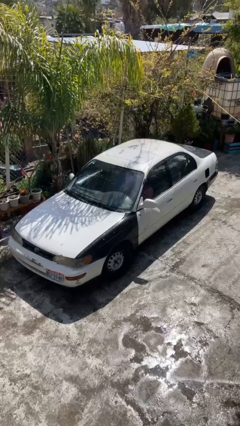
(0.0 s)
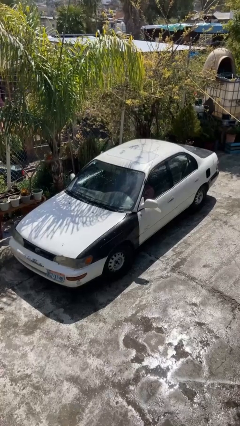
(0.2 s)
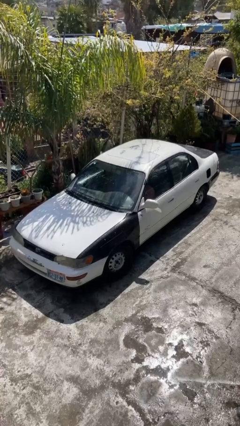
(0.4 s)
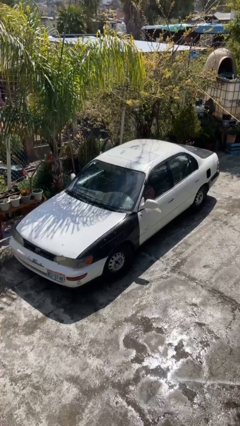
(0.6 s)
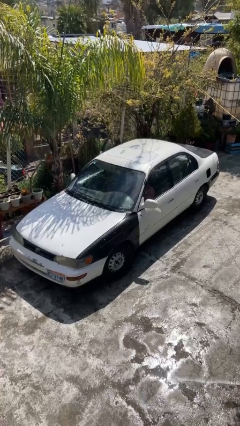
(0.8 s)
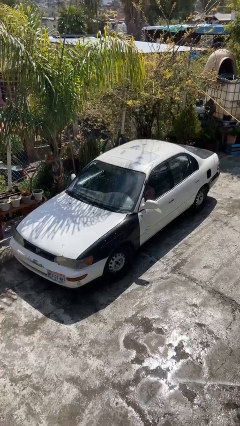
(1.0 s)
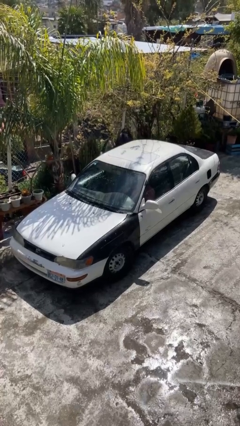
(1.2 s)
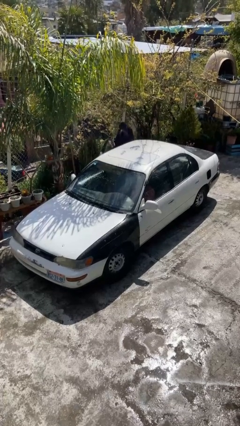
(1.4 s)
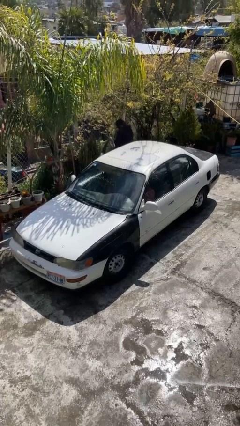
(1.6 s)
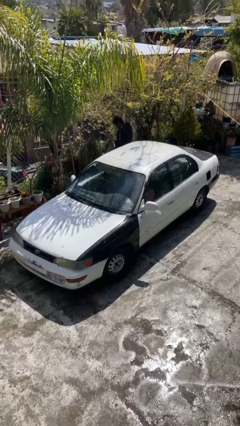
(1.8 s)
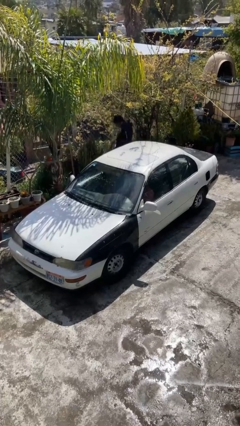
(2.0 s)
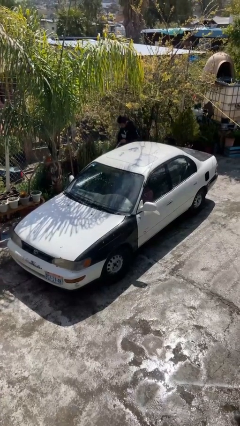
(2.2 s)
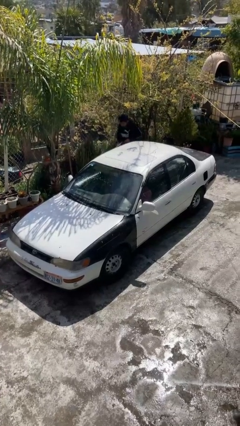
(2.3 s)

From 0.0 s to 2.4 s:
car drops off person

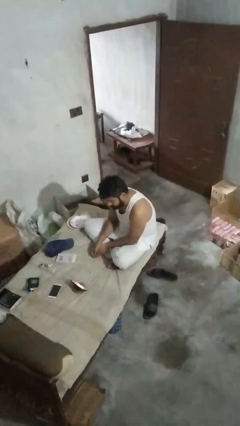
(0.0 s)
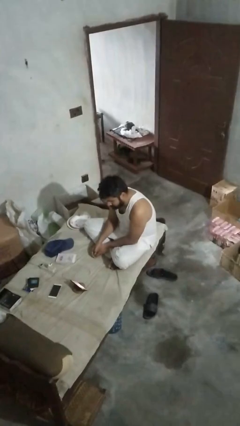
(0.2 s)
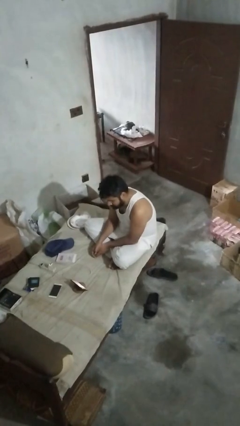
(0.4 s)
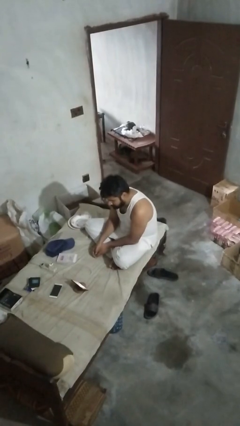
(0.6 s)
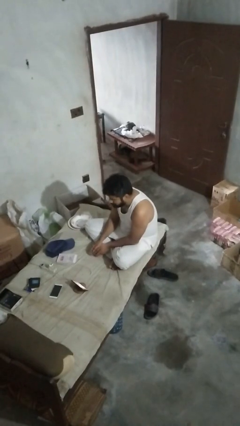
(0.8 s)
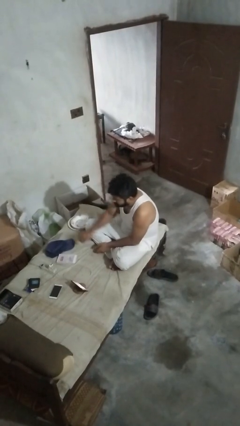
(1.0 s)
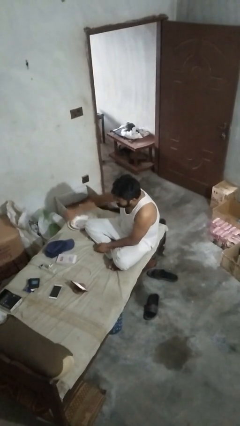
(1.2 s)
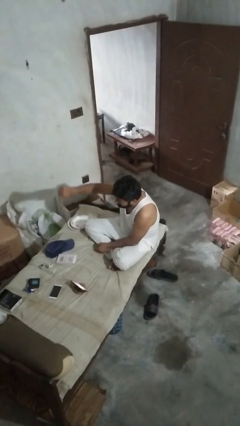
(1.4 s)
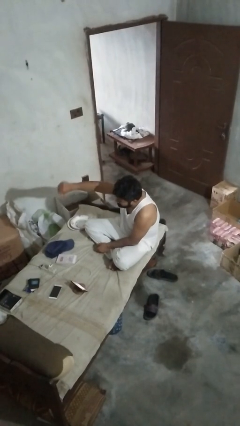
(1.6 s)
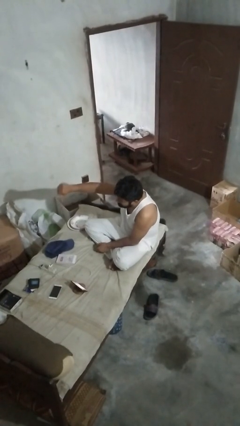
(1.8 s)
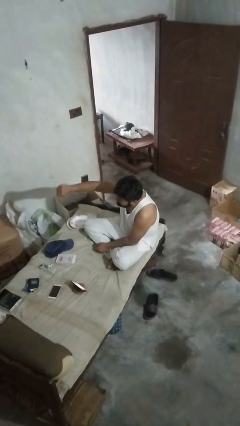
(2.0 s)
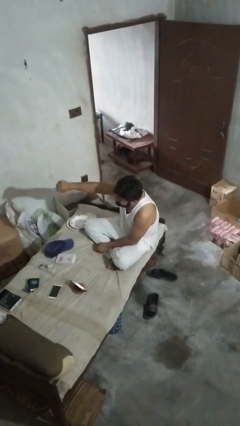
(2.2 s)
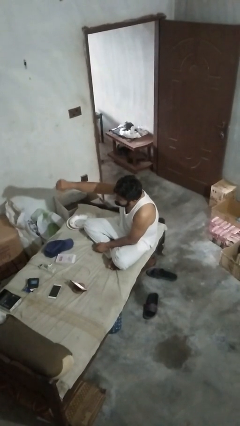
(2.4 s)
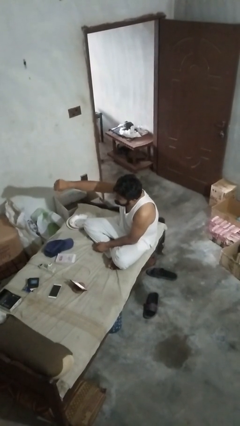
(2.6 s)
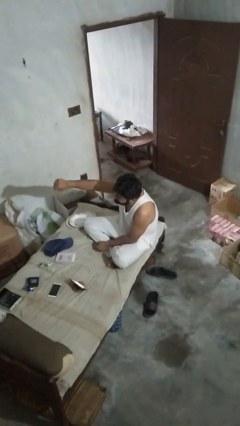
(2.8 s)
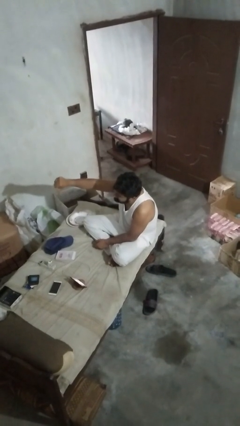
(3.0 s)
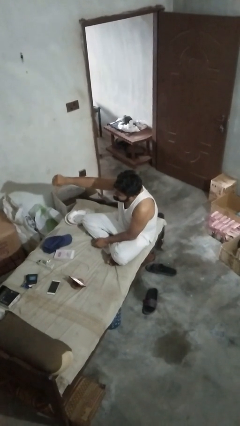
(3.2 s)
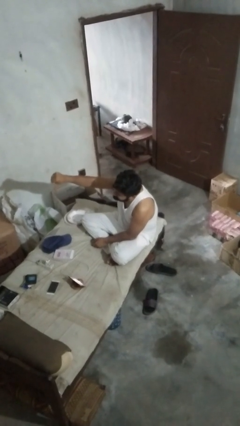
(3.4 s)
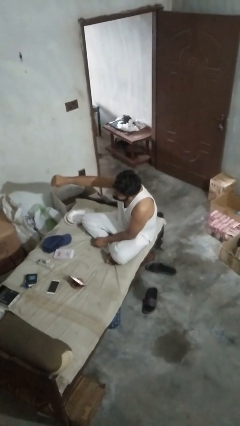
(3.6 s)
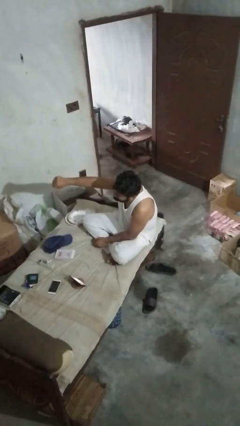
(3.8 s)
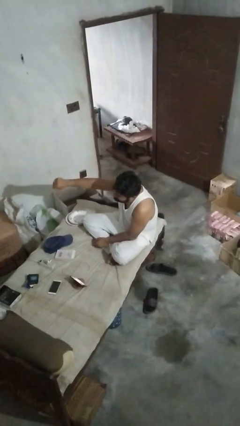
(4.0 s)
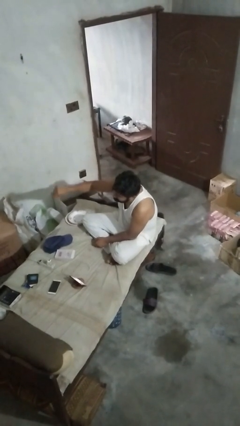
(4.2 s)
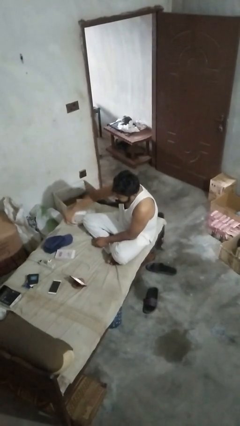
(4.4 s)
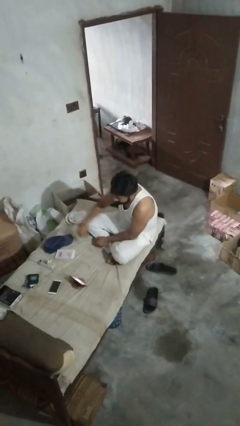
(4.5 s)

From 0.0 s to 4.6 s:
person gestures thumbs down

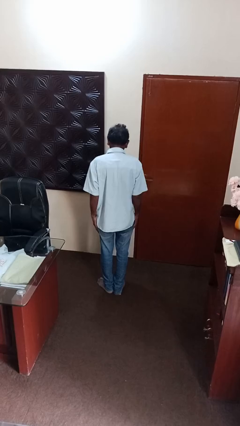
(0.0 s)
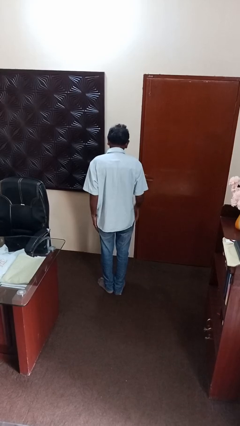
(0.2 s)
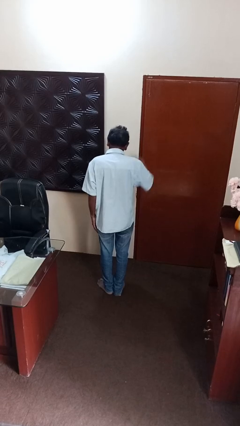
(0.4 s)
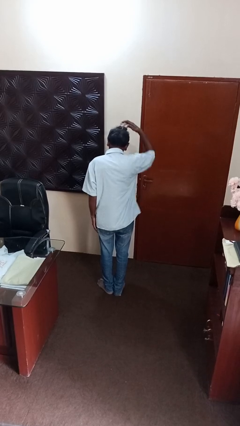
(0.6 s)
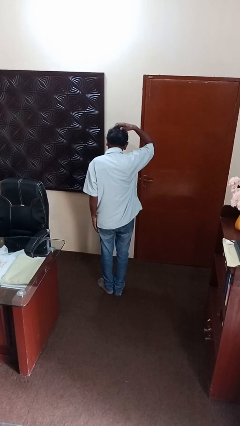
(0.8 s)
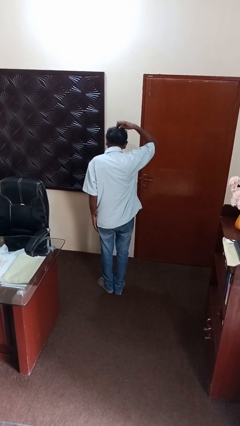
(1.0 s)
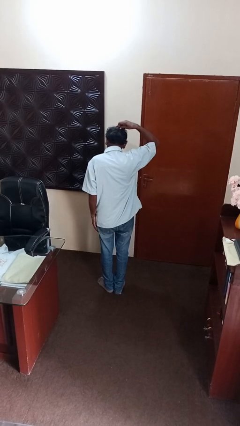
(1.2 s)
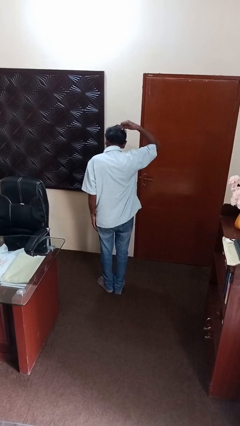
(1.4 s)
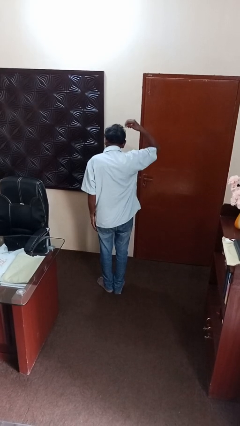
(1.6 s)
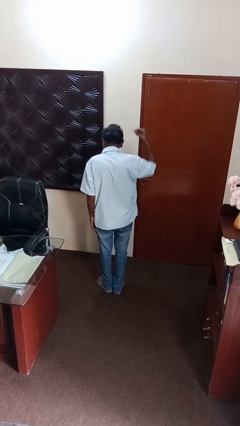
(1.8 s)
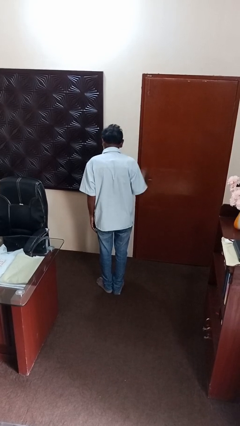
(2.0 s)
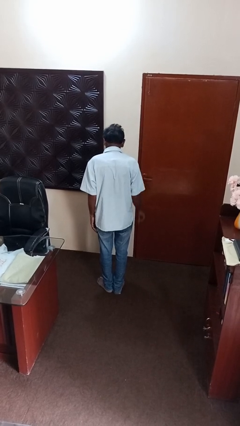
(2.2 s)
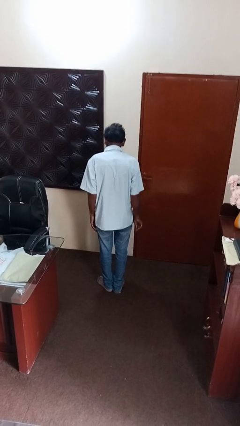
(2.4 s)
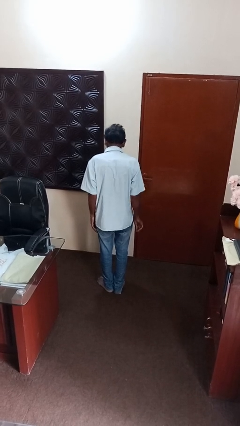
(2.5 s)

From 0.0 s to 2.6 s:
person takes off hairtie

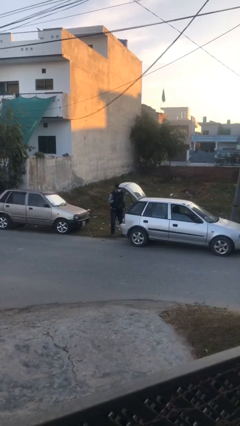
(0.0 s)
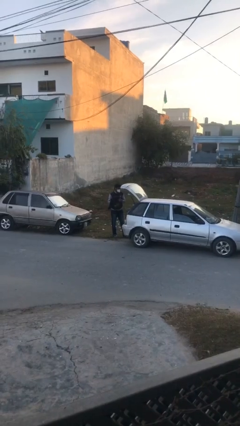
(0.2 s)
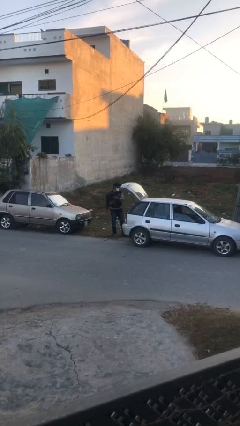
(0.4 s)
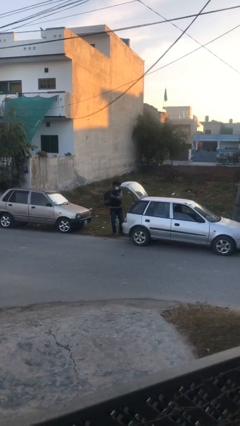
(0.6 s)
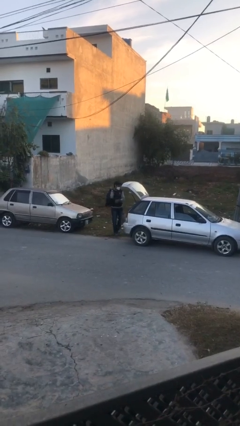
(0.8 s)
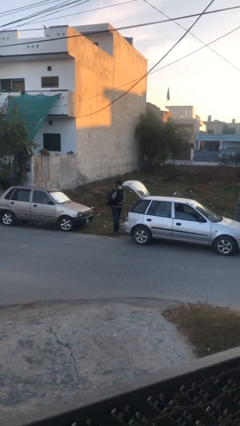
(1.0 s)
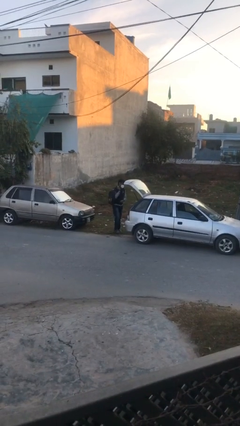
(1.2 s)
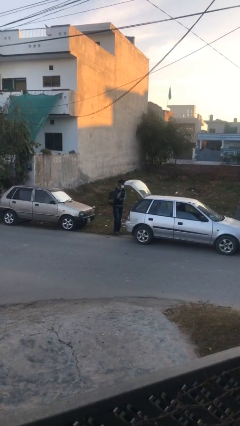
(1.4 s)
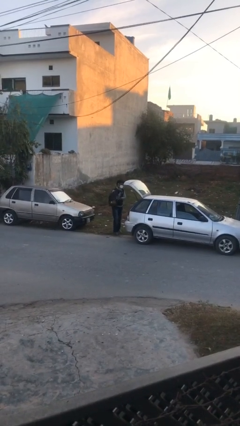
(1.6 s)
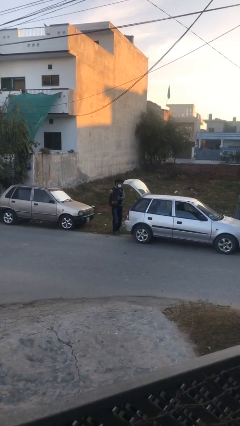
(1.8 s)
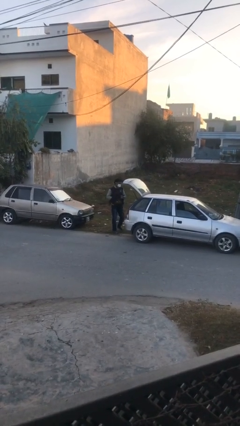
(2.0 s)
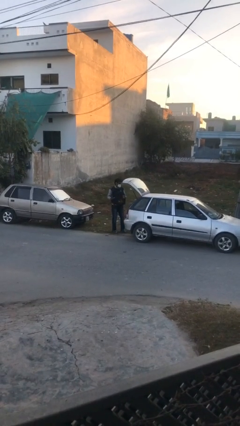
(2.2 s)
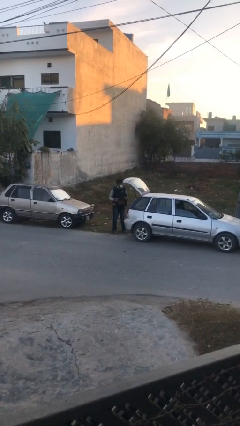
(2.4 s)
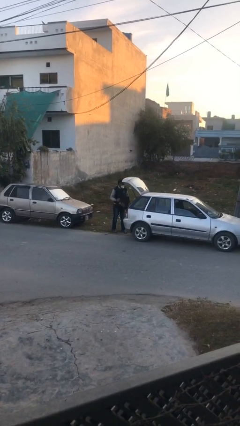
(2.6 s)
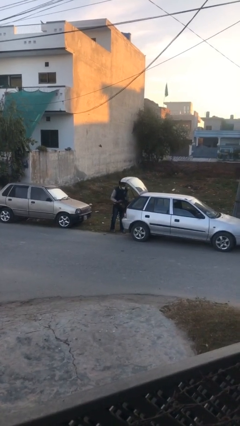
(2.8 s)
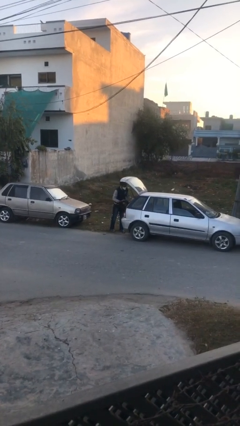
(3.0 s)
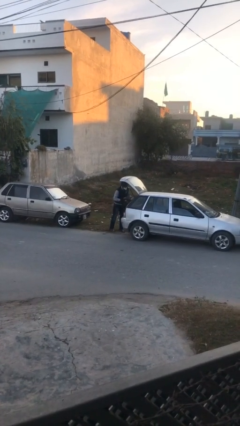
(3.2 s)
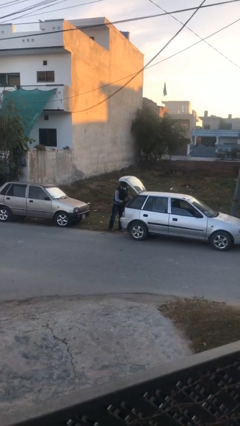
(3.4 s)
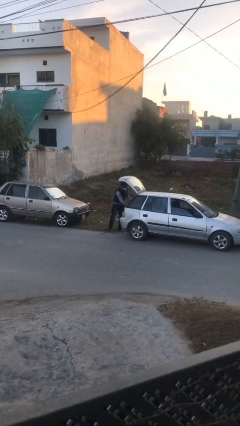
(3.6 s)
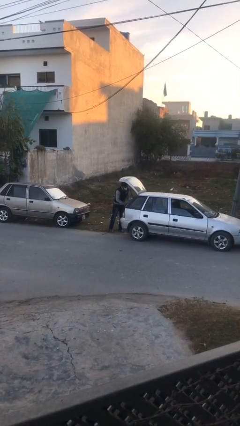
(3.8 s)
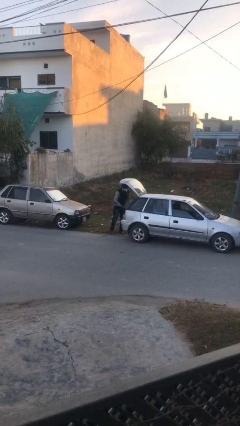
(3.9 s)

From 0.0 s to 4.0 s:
person loads car

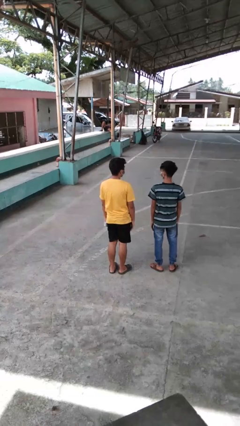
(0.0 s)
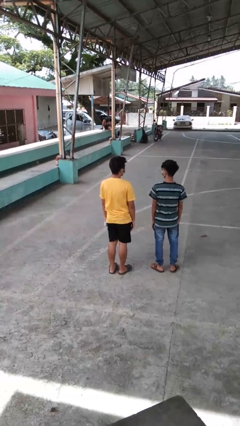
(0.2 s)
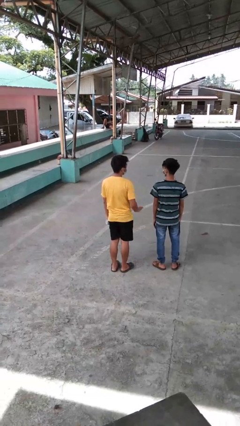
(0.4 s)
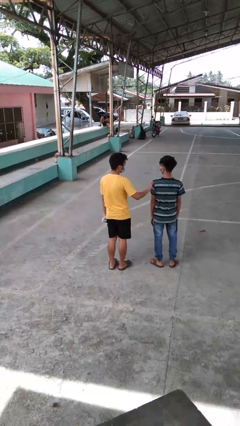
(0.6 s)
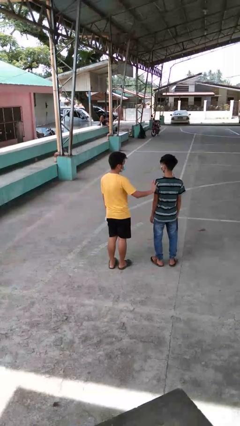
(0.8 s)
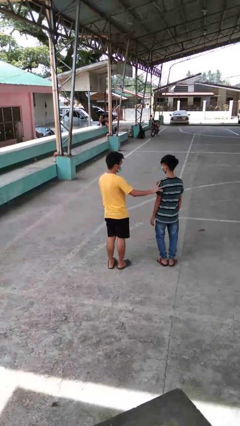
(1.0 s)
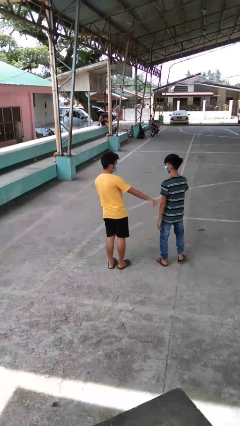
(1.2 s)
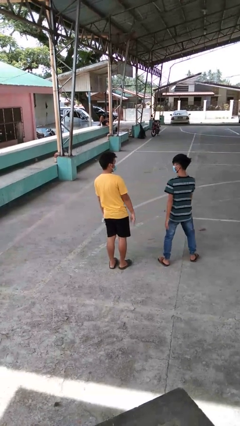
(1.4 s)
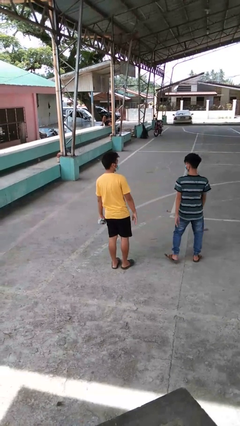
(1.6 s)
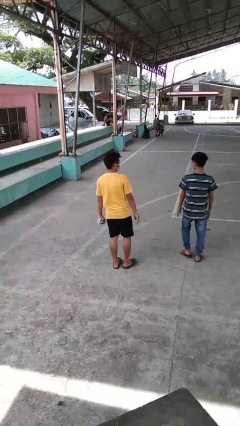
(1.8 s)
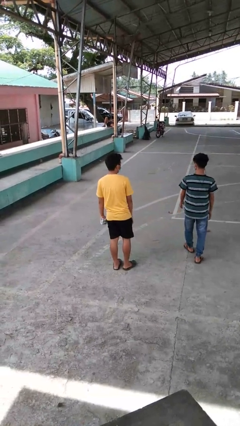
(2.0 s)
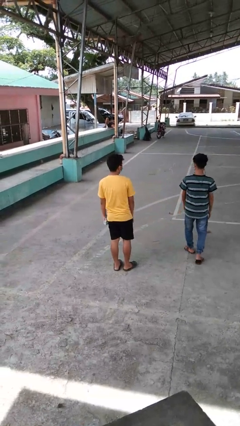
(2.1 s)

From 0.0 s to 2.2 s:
person shoves person

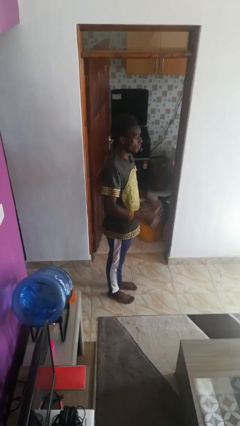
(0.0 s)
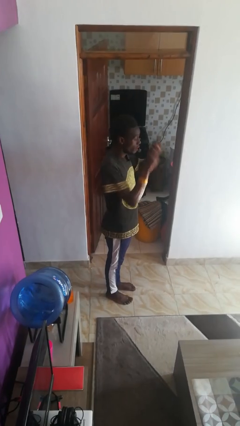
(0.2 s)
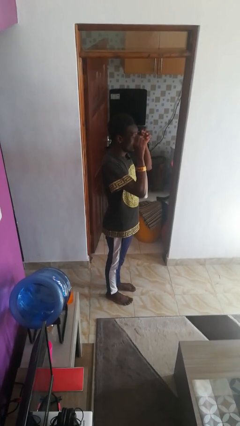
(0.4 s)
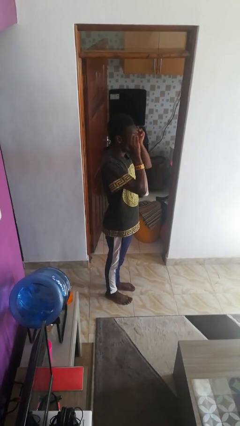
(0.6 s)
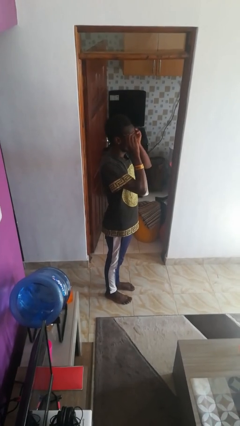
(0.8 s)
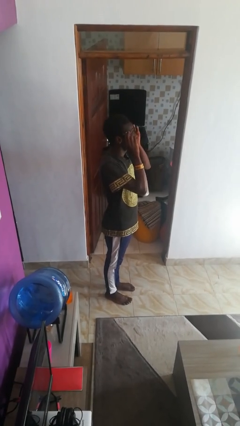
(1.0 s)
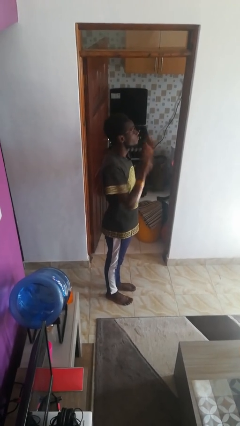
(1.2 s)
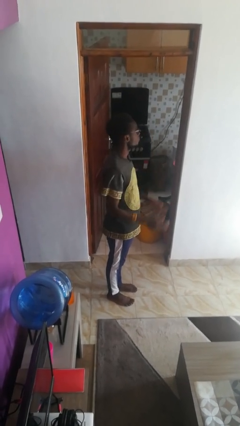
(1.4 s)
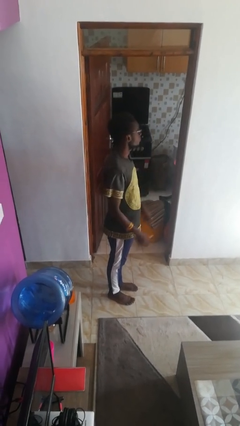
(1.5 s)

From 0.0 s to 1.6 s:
person puts on glasses

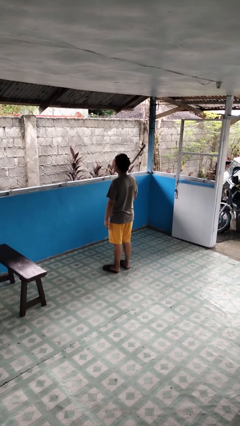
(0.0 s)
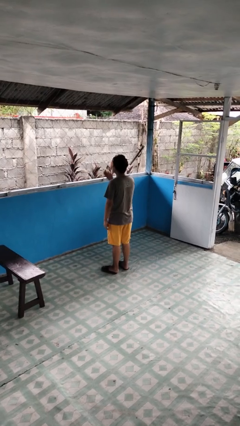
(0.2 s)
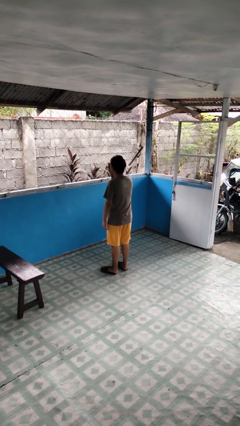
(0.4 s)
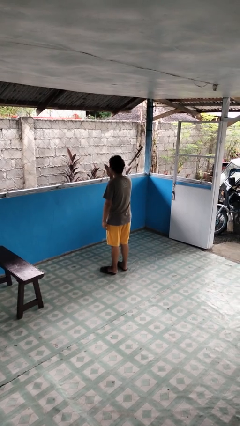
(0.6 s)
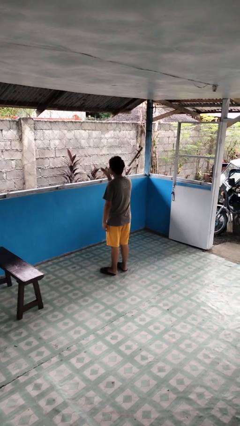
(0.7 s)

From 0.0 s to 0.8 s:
person gestures blow kiss
